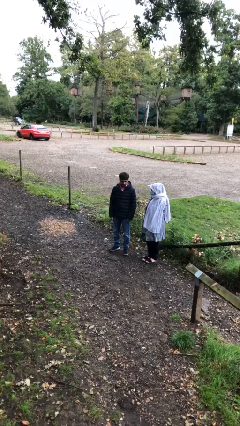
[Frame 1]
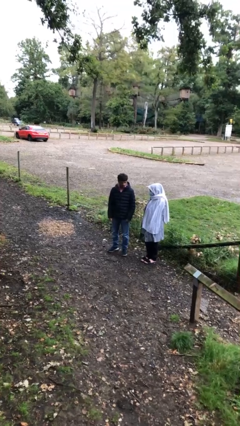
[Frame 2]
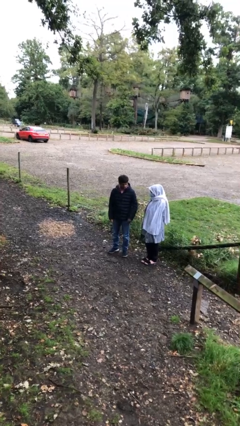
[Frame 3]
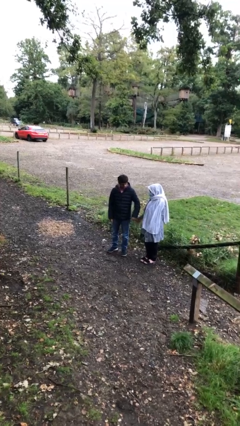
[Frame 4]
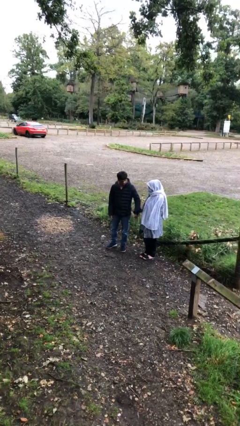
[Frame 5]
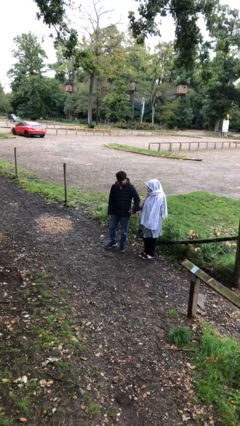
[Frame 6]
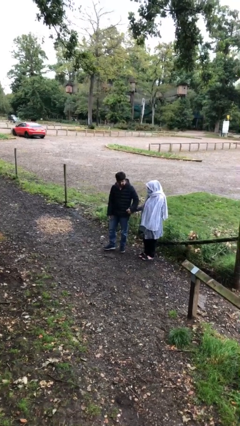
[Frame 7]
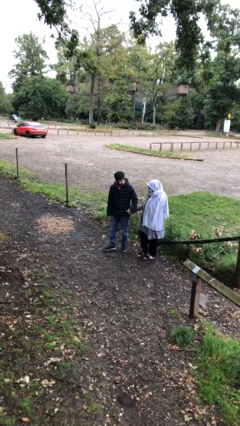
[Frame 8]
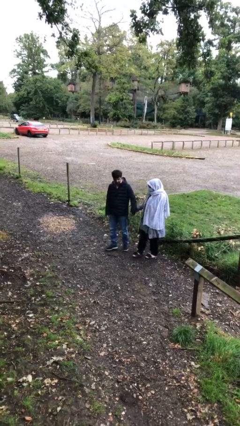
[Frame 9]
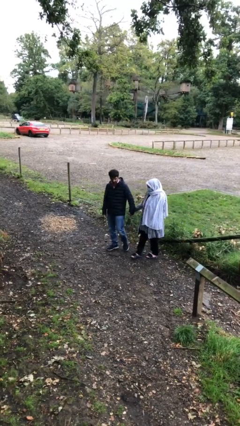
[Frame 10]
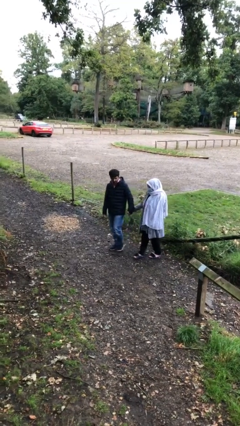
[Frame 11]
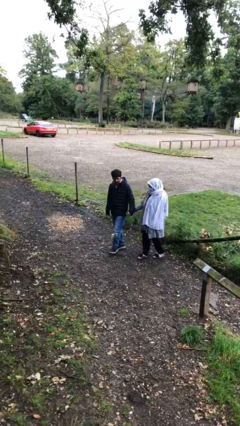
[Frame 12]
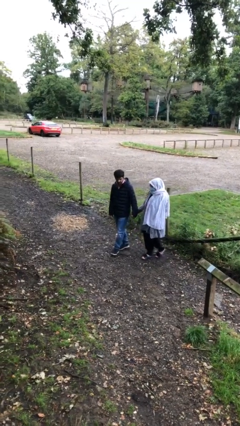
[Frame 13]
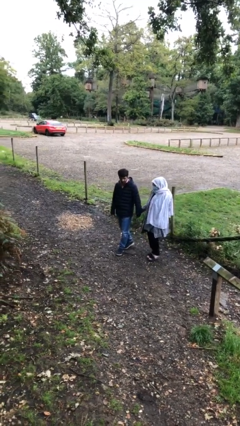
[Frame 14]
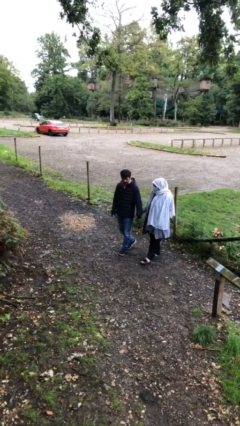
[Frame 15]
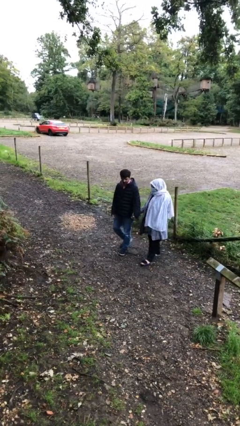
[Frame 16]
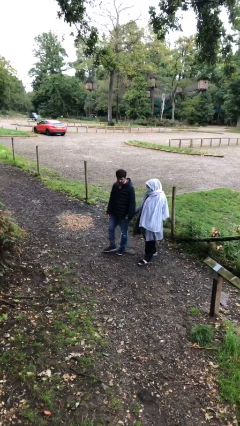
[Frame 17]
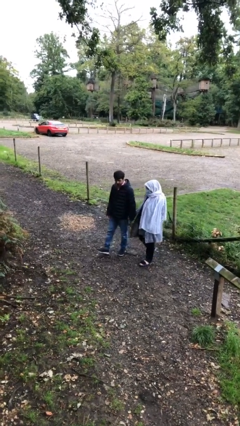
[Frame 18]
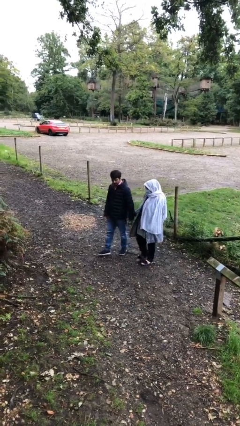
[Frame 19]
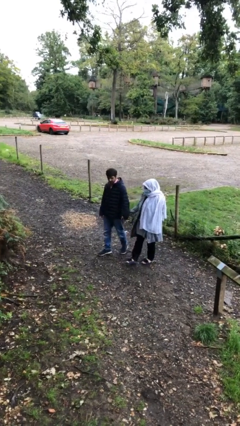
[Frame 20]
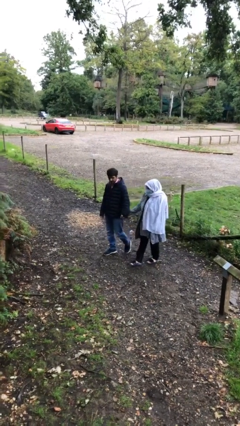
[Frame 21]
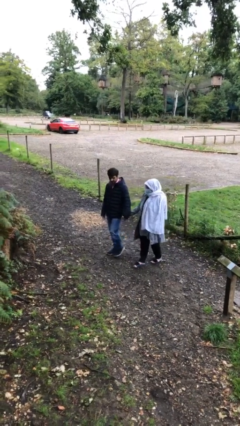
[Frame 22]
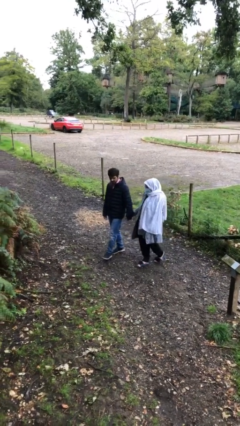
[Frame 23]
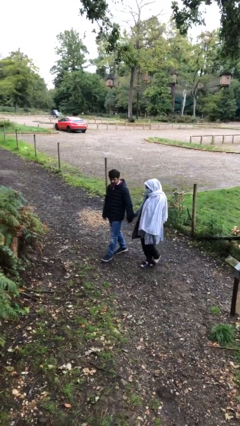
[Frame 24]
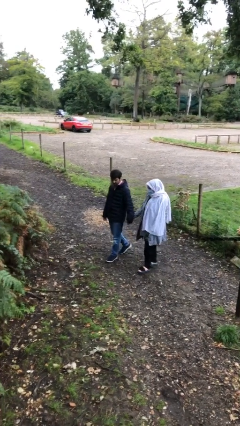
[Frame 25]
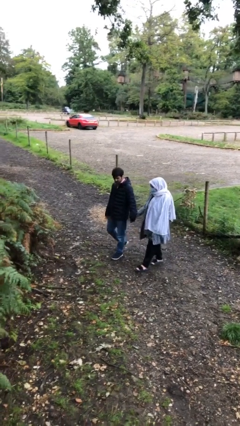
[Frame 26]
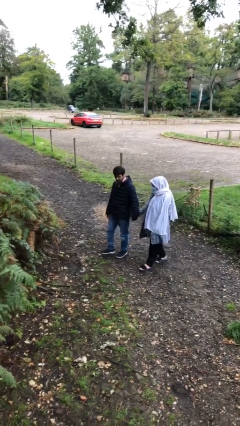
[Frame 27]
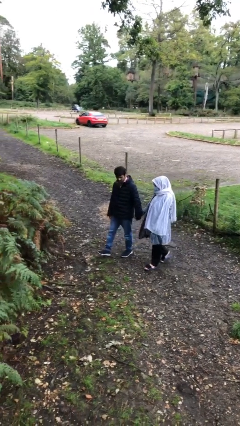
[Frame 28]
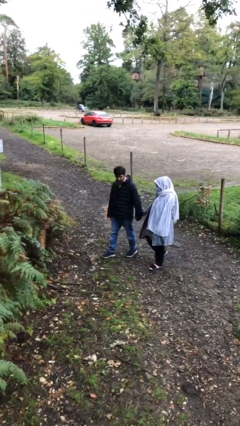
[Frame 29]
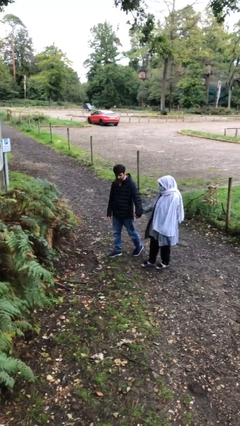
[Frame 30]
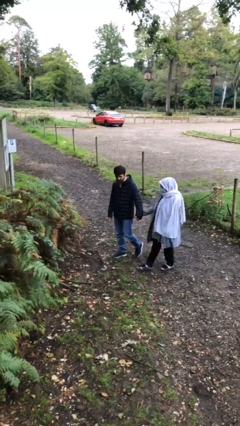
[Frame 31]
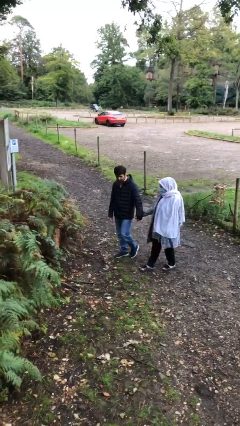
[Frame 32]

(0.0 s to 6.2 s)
person holds hand

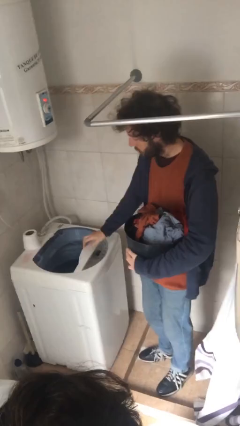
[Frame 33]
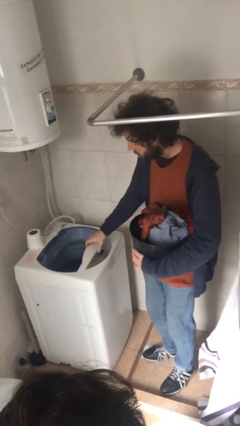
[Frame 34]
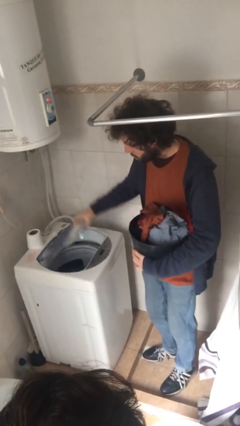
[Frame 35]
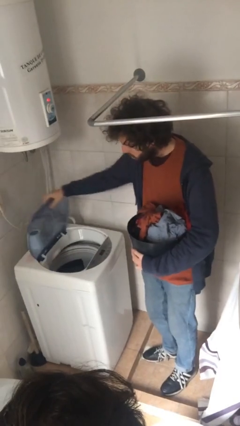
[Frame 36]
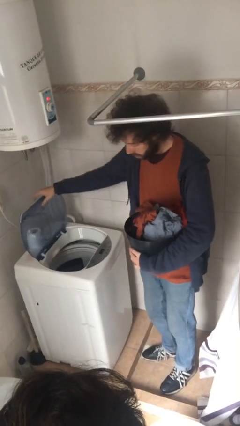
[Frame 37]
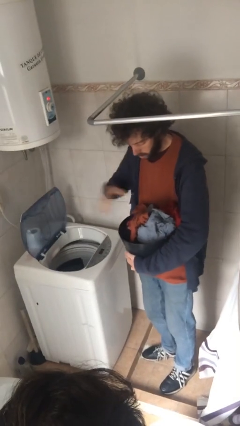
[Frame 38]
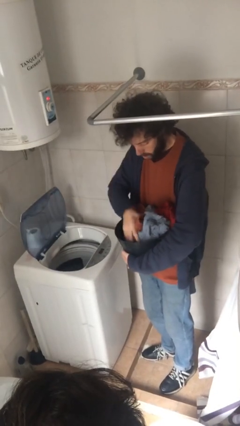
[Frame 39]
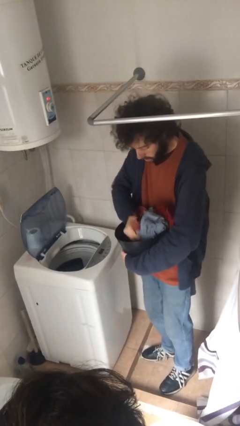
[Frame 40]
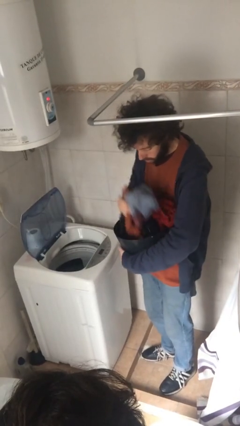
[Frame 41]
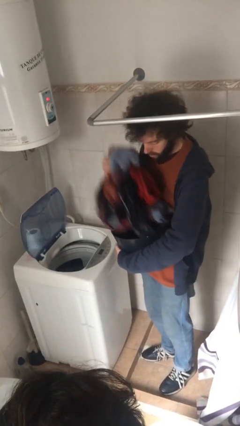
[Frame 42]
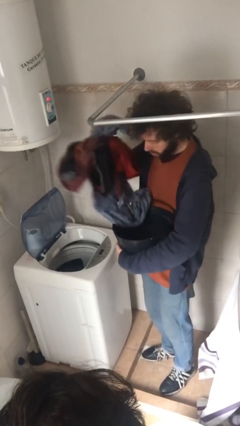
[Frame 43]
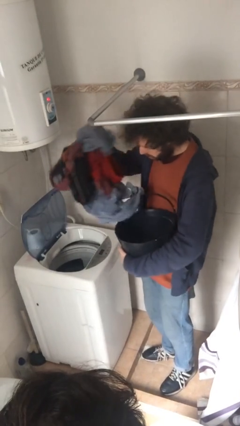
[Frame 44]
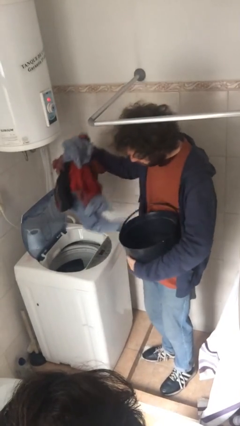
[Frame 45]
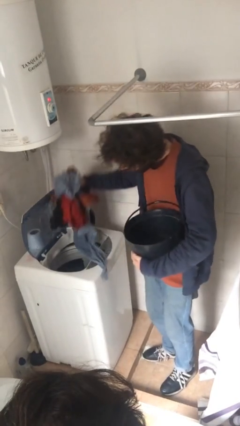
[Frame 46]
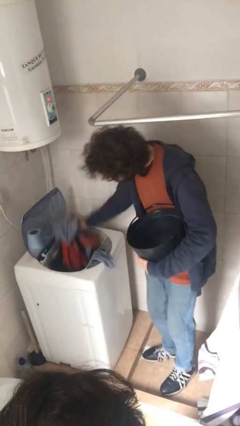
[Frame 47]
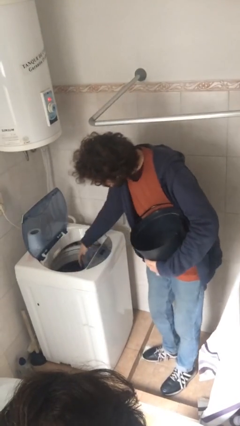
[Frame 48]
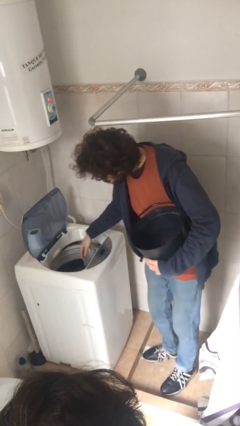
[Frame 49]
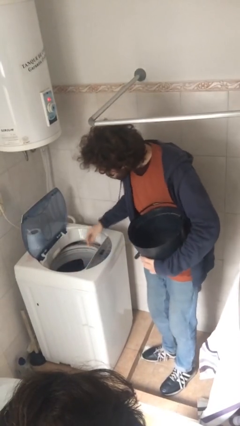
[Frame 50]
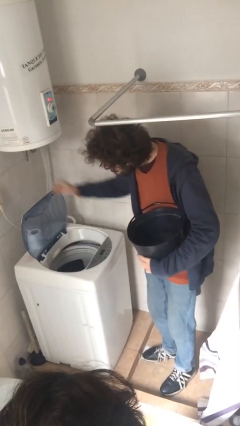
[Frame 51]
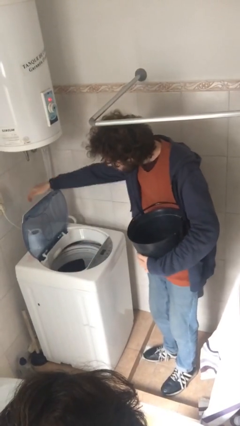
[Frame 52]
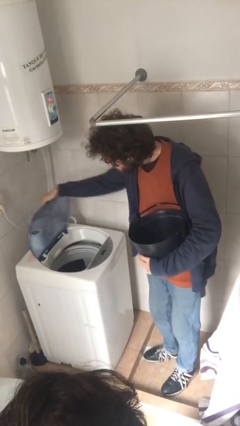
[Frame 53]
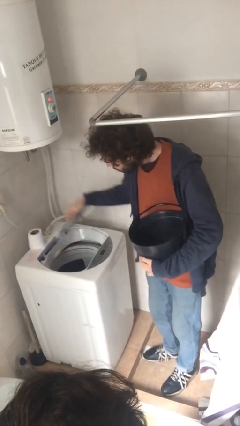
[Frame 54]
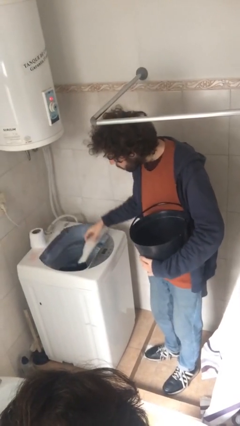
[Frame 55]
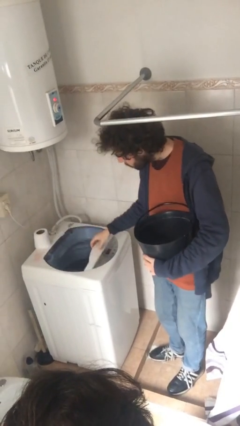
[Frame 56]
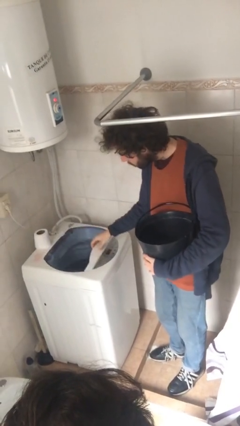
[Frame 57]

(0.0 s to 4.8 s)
person loads clotheswasher

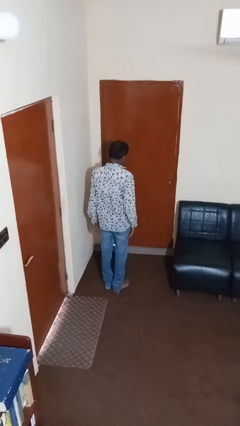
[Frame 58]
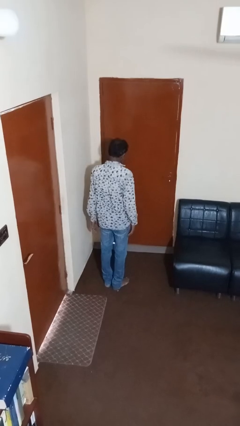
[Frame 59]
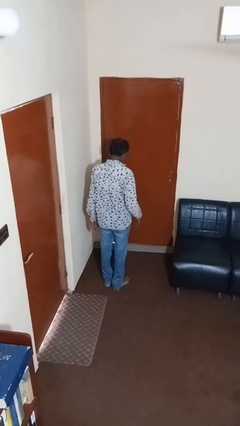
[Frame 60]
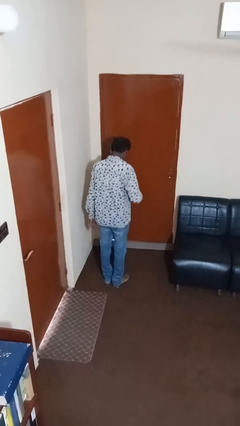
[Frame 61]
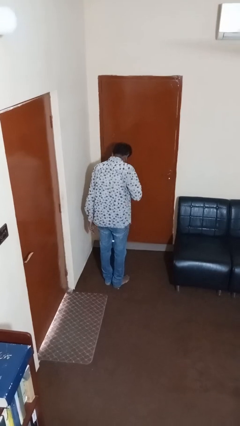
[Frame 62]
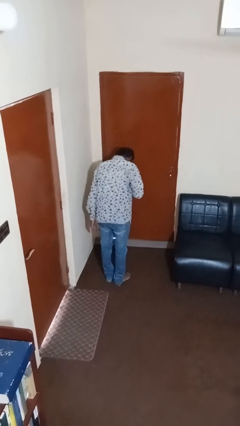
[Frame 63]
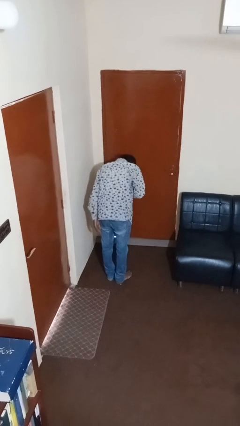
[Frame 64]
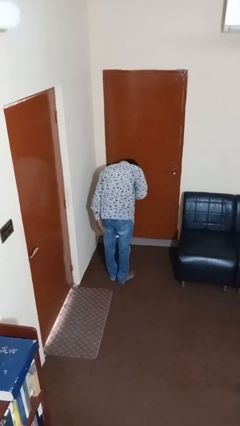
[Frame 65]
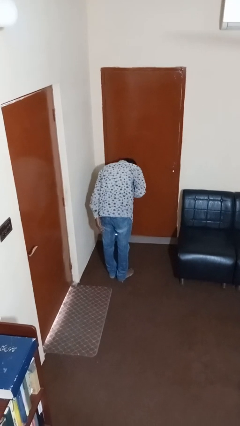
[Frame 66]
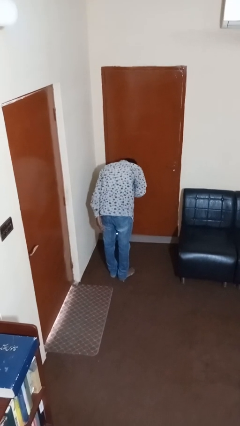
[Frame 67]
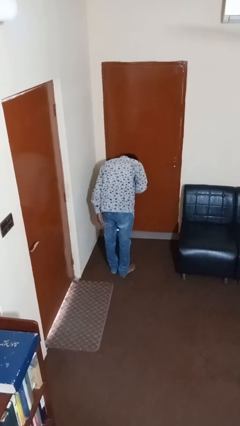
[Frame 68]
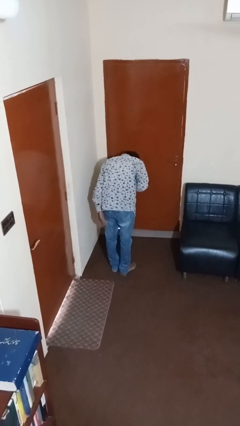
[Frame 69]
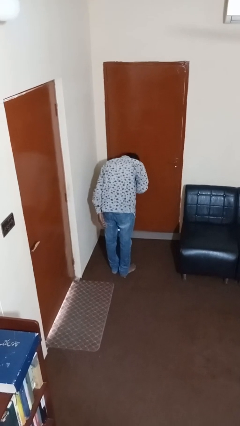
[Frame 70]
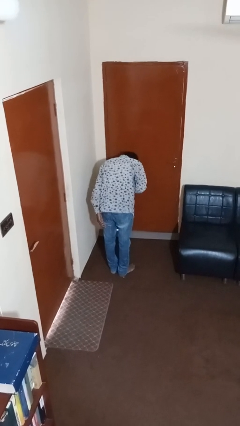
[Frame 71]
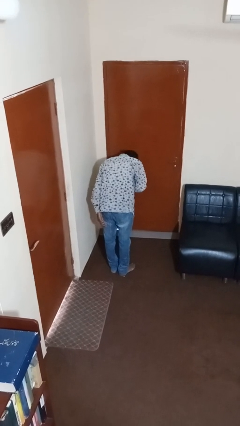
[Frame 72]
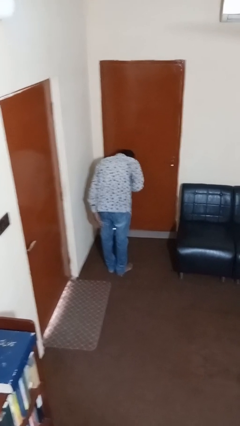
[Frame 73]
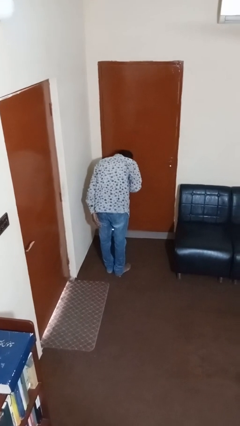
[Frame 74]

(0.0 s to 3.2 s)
person bows

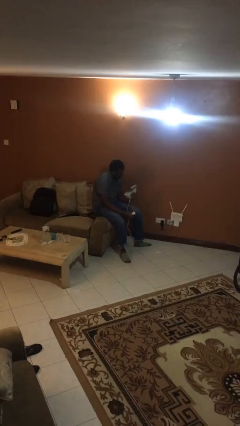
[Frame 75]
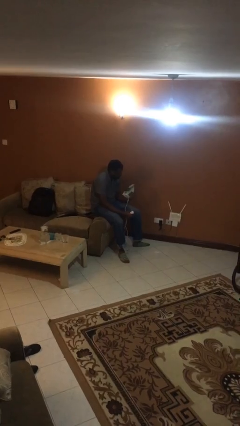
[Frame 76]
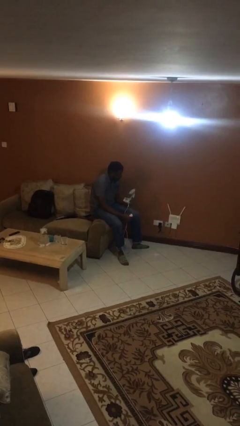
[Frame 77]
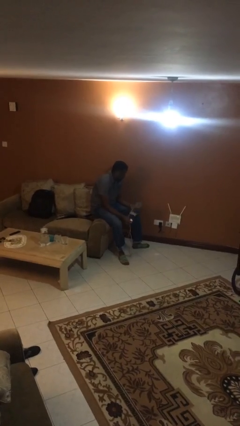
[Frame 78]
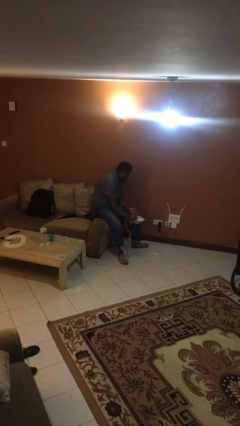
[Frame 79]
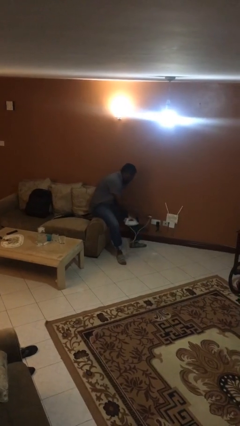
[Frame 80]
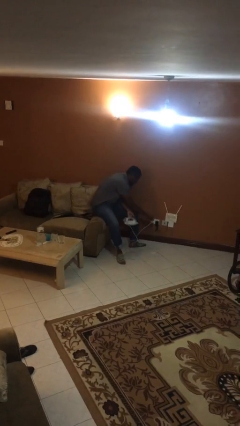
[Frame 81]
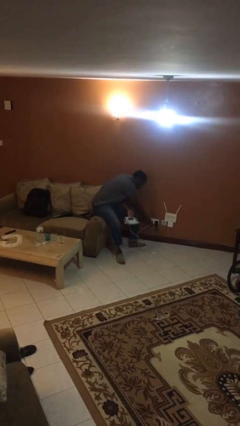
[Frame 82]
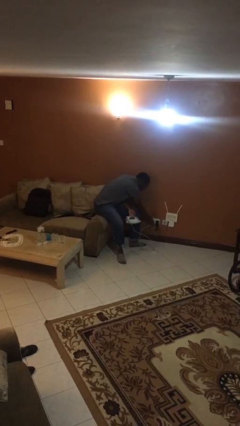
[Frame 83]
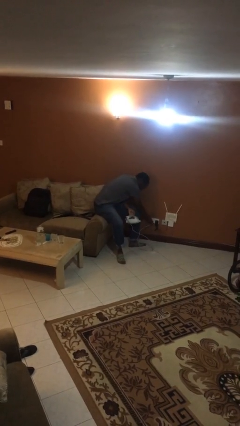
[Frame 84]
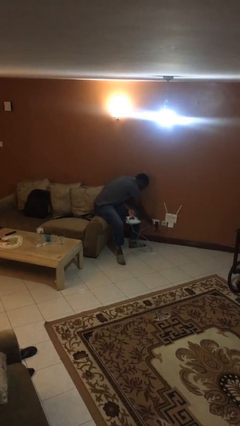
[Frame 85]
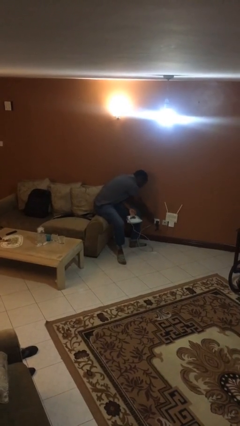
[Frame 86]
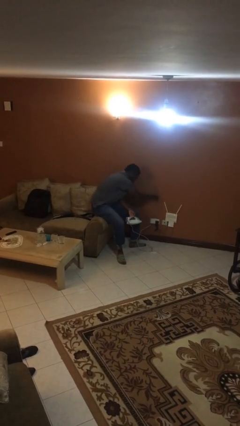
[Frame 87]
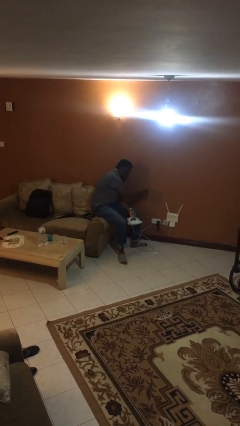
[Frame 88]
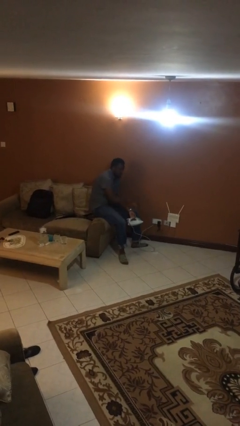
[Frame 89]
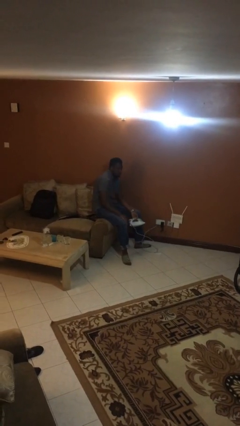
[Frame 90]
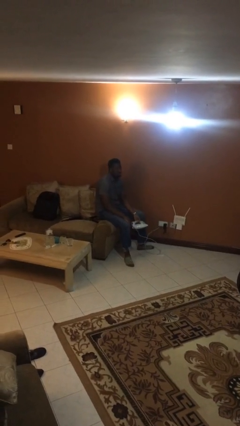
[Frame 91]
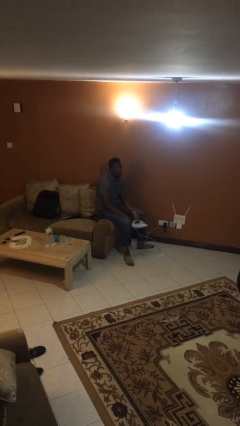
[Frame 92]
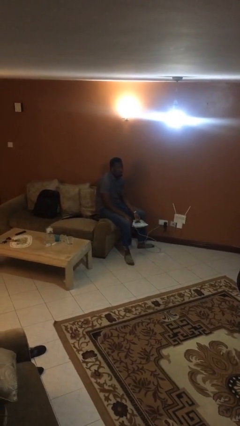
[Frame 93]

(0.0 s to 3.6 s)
person plugs into electrical socket

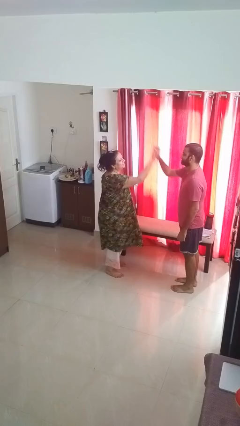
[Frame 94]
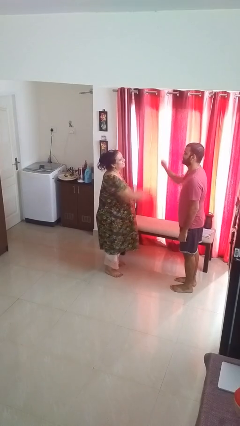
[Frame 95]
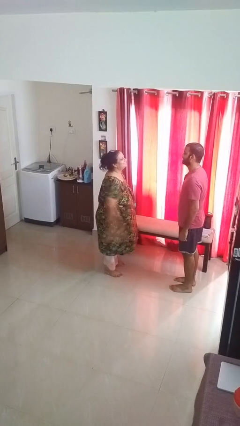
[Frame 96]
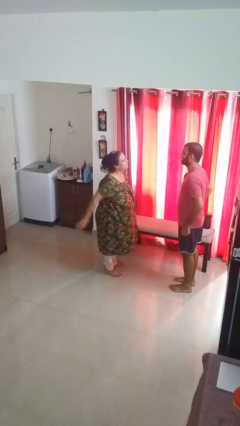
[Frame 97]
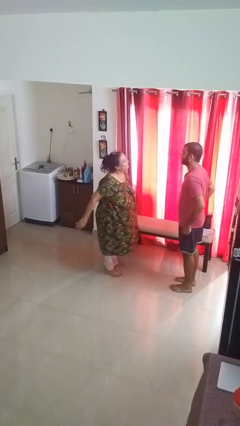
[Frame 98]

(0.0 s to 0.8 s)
person highfives hand
